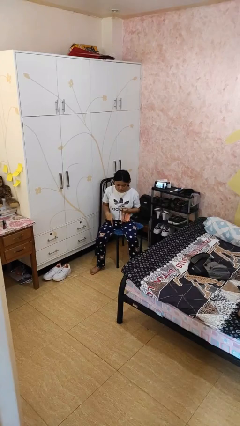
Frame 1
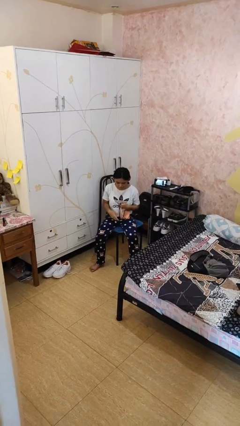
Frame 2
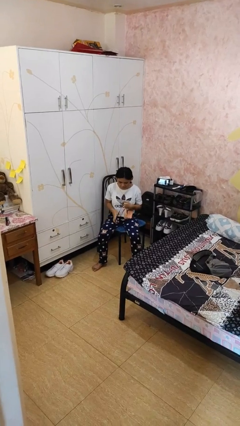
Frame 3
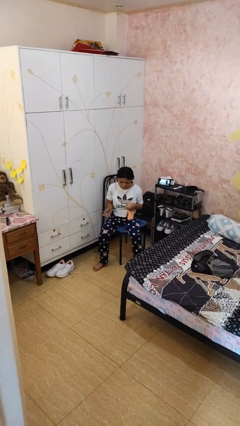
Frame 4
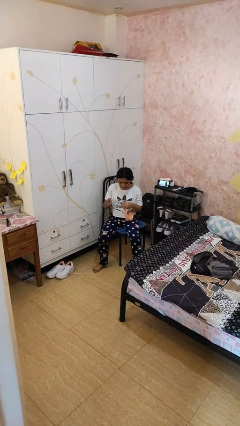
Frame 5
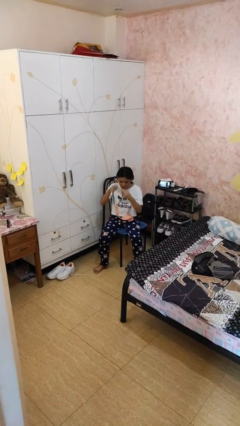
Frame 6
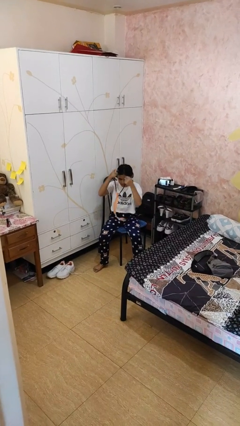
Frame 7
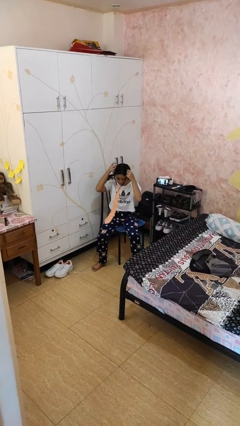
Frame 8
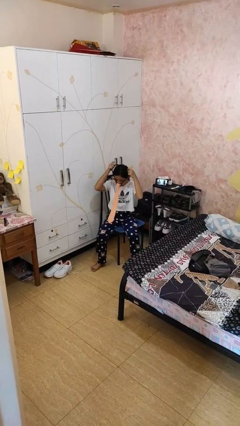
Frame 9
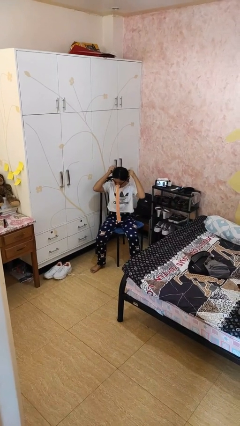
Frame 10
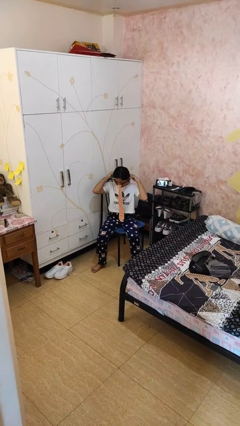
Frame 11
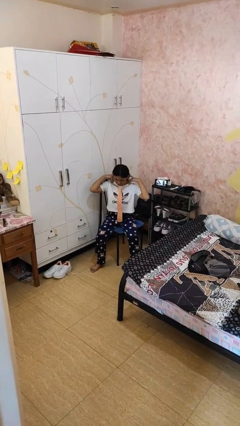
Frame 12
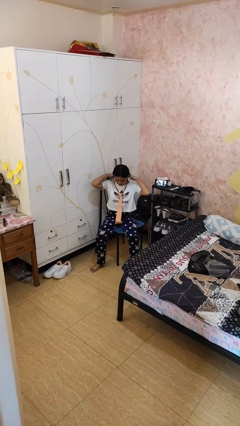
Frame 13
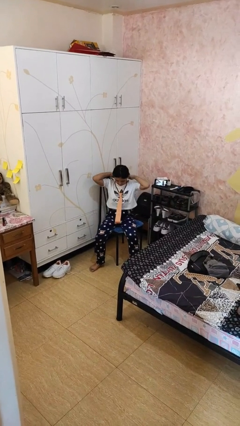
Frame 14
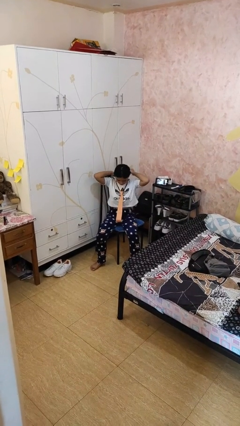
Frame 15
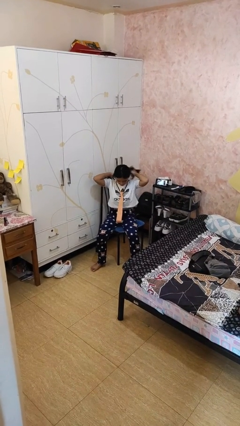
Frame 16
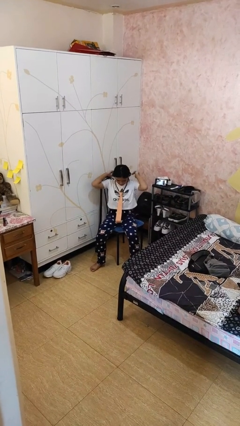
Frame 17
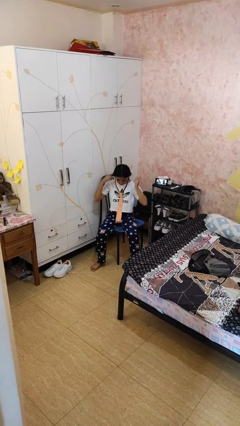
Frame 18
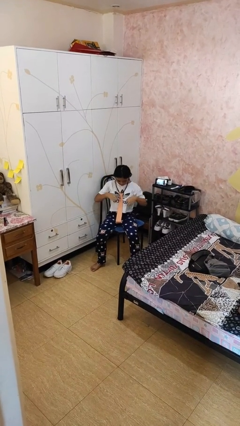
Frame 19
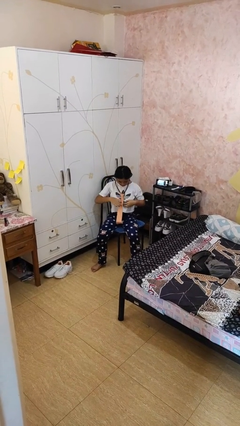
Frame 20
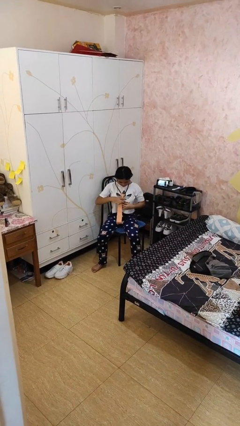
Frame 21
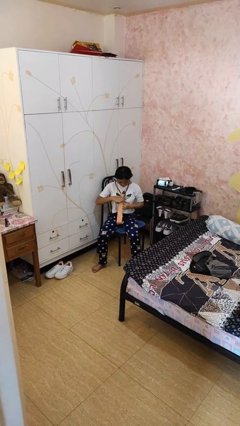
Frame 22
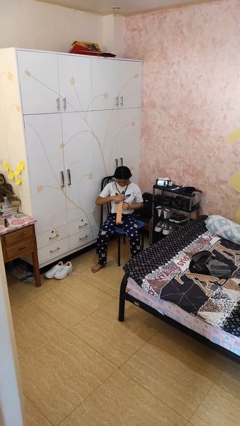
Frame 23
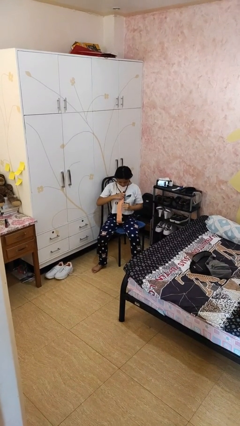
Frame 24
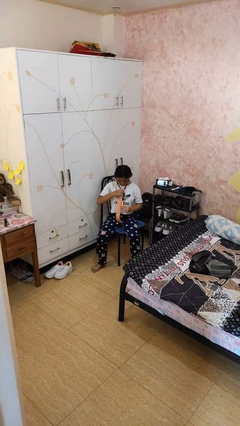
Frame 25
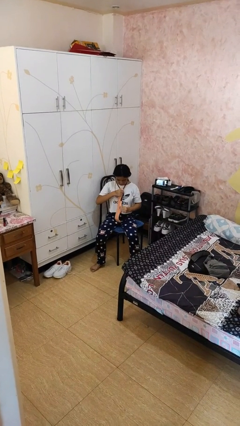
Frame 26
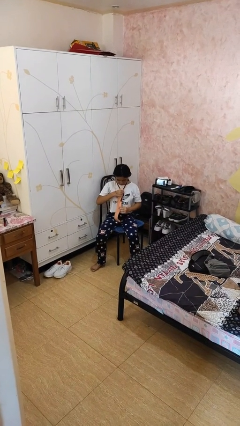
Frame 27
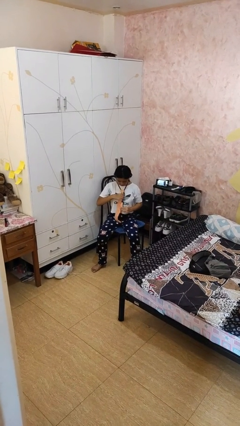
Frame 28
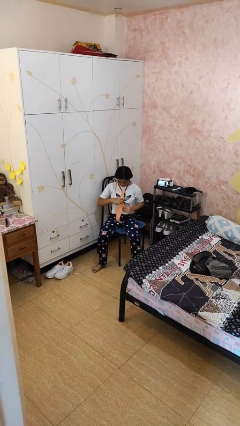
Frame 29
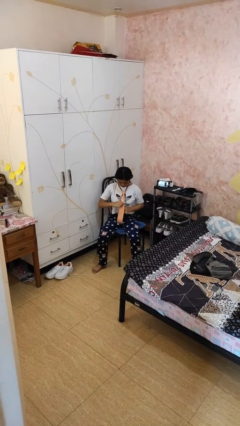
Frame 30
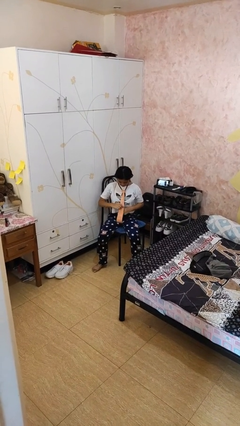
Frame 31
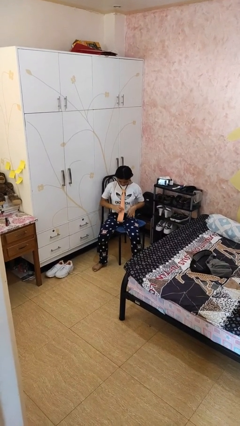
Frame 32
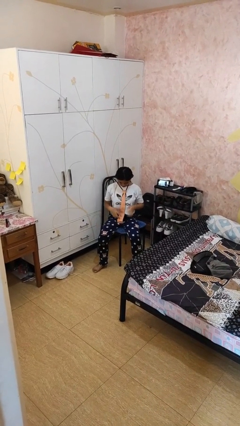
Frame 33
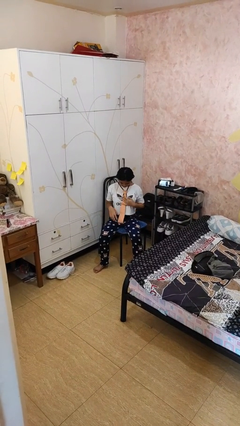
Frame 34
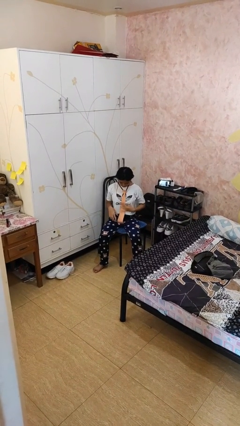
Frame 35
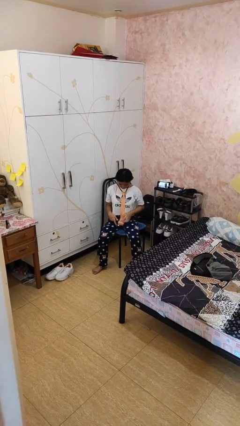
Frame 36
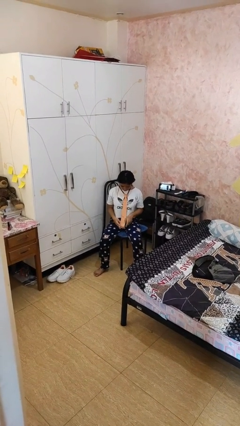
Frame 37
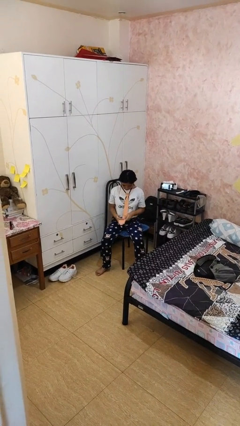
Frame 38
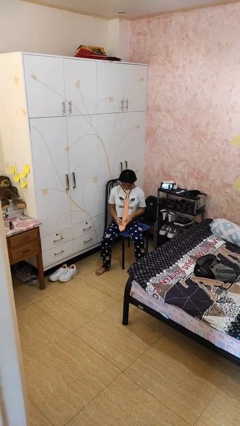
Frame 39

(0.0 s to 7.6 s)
person puts on necktie

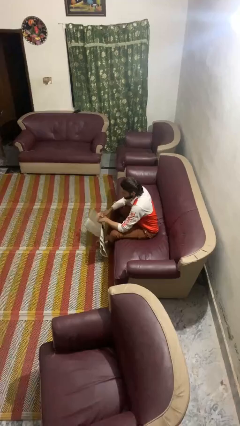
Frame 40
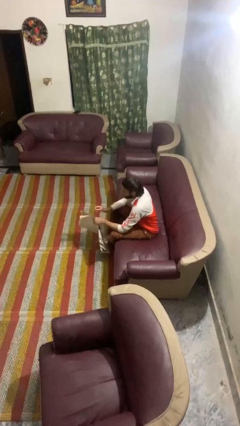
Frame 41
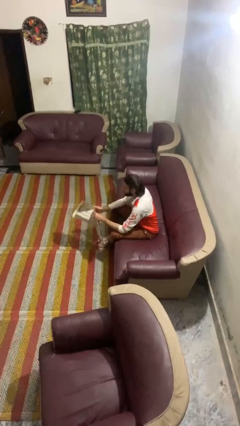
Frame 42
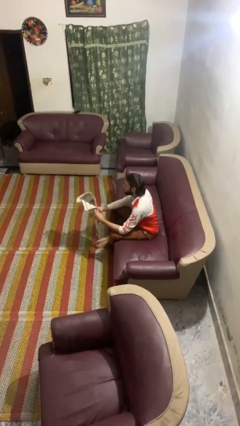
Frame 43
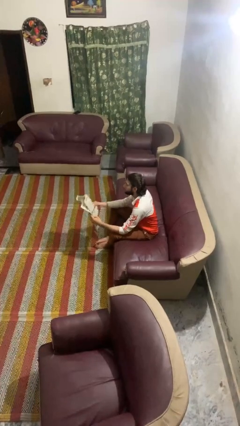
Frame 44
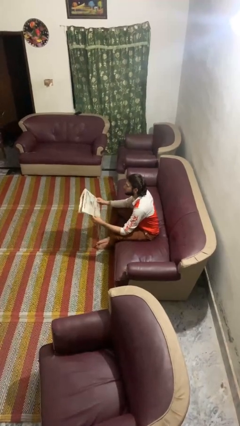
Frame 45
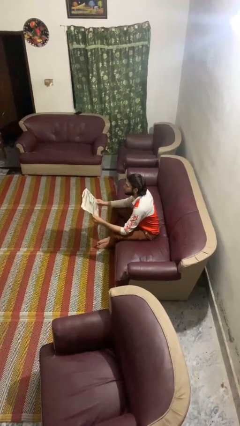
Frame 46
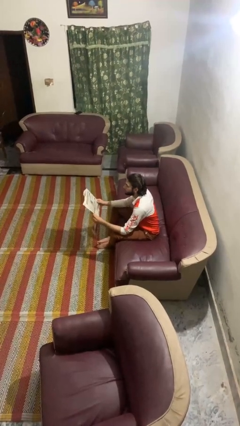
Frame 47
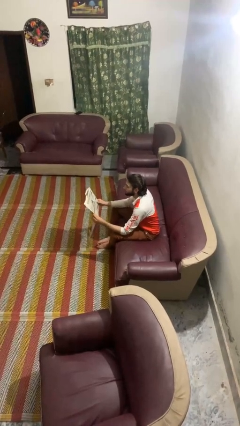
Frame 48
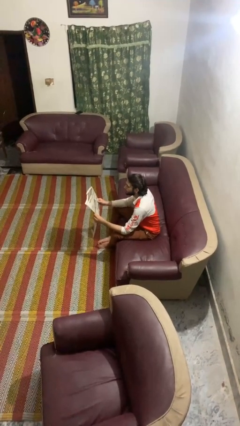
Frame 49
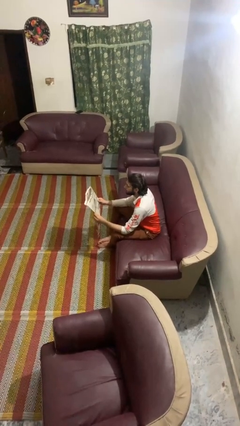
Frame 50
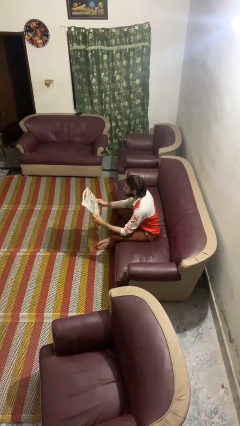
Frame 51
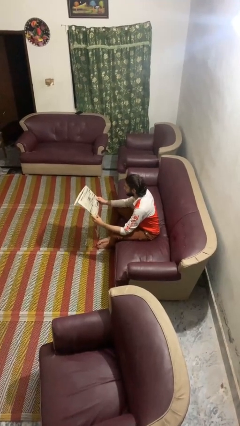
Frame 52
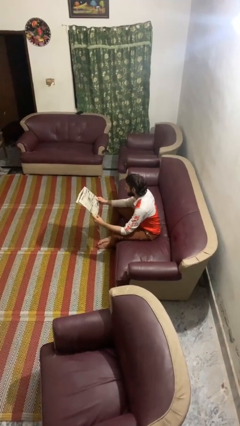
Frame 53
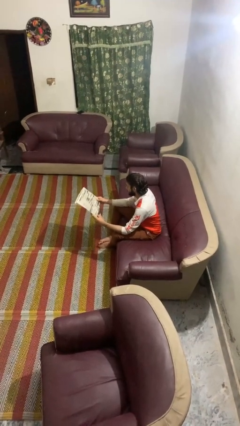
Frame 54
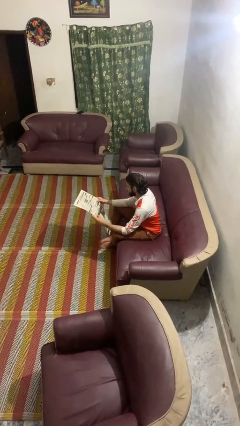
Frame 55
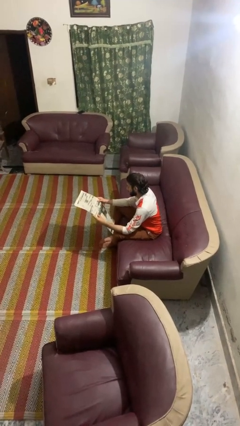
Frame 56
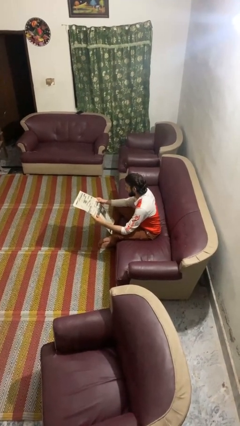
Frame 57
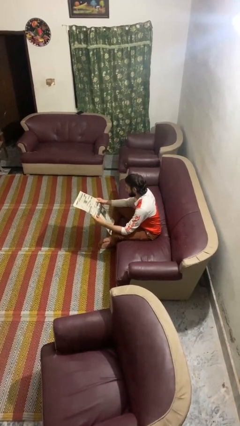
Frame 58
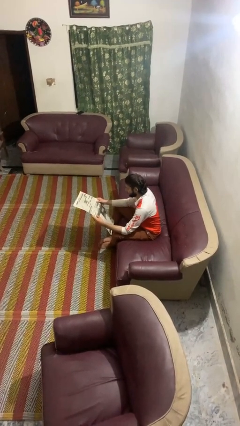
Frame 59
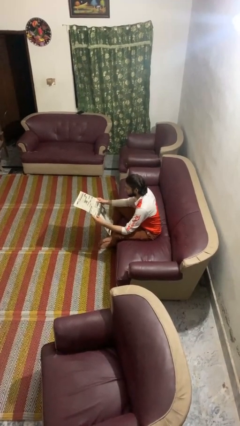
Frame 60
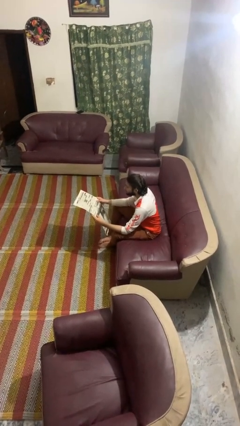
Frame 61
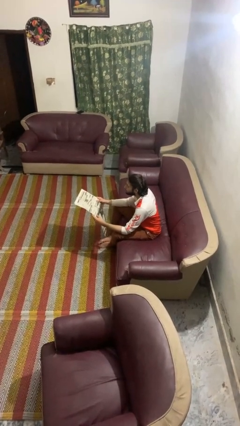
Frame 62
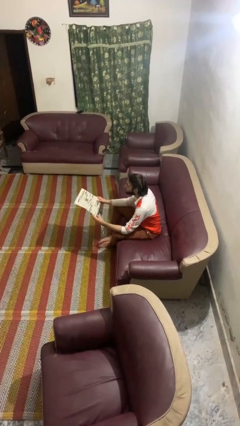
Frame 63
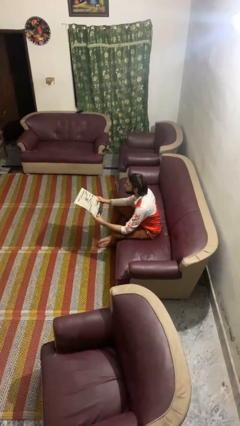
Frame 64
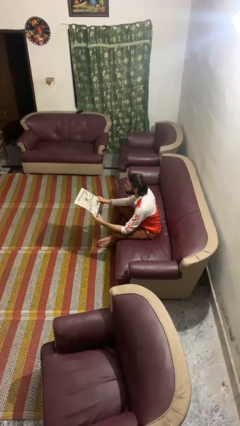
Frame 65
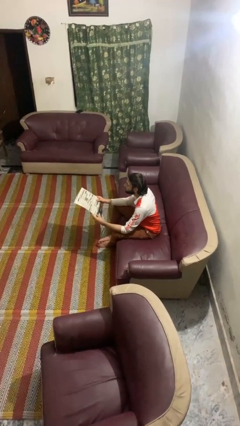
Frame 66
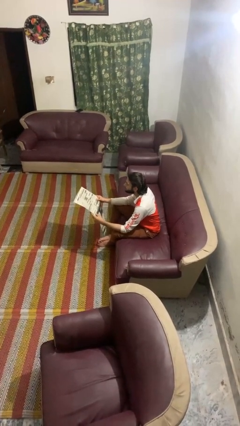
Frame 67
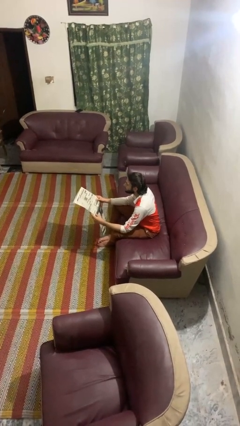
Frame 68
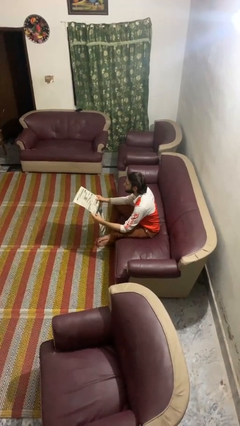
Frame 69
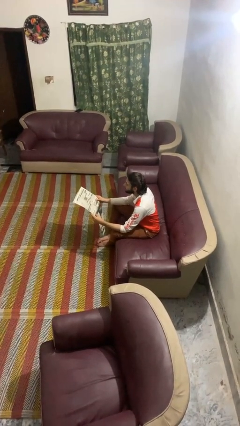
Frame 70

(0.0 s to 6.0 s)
person reads newspaper

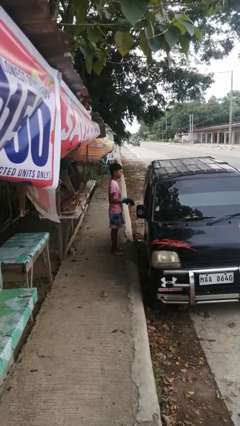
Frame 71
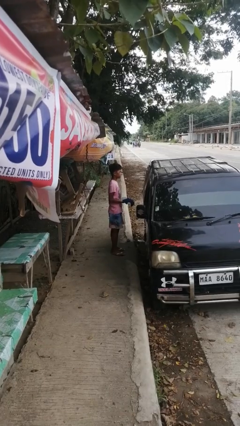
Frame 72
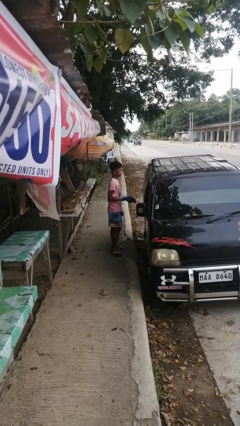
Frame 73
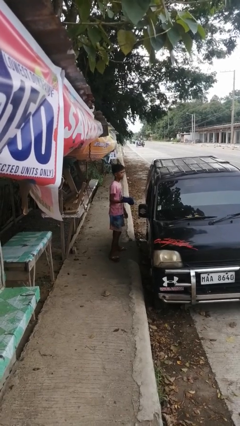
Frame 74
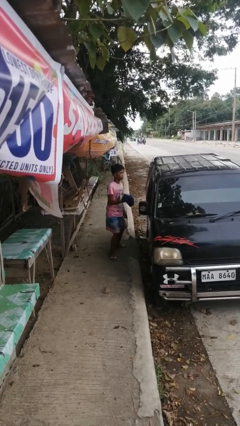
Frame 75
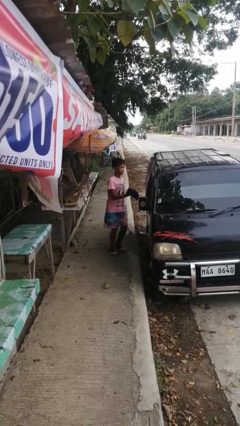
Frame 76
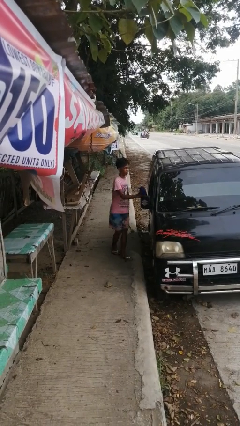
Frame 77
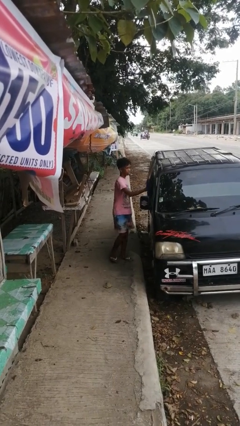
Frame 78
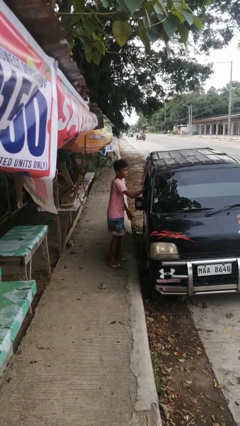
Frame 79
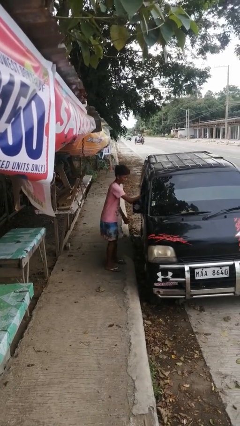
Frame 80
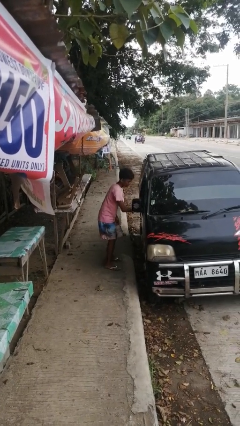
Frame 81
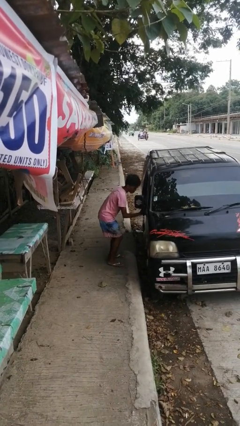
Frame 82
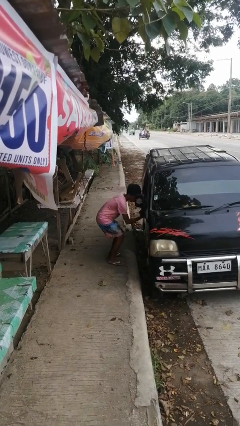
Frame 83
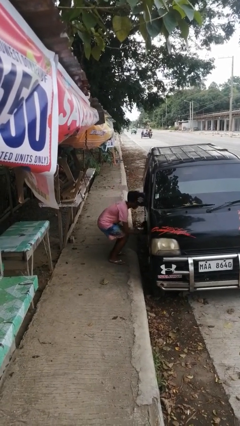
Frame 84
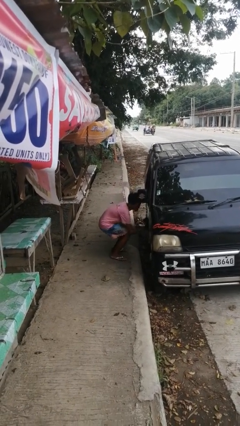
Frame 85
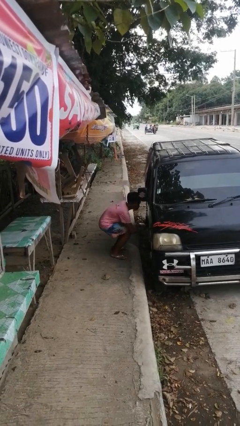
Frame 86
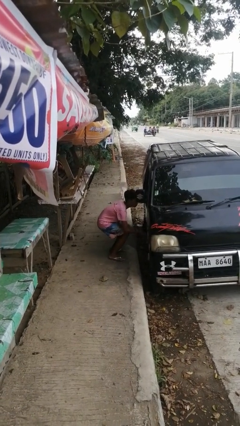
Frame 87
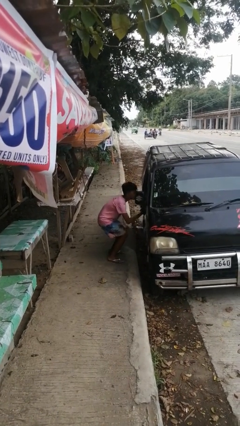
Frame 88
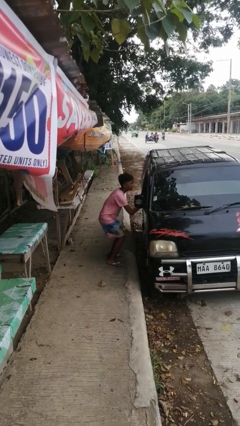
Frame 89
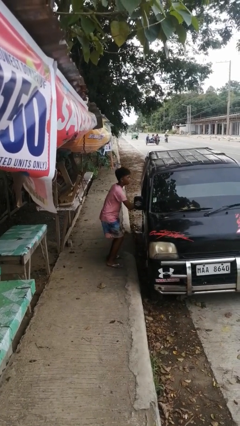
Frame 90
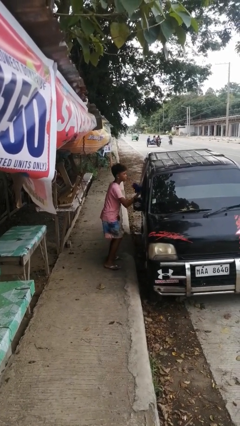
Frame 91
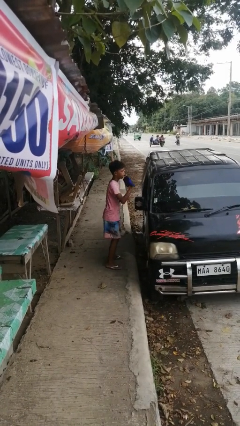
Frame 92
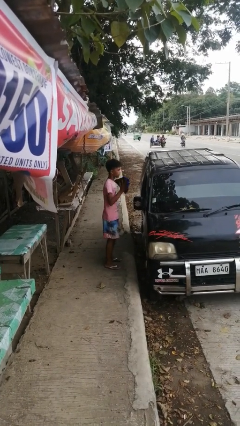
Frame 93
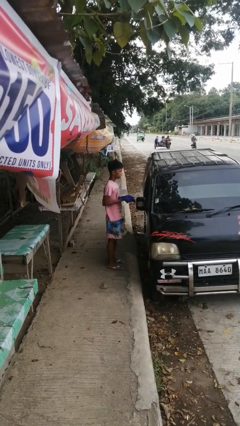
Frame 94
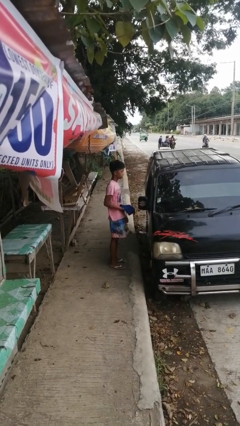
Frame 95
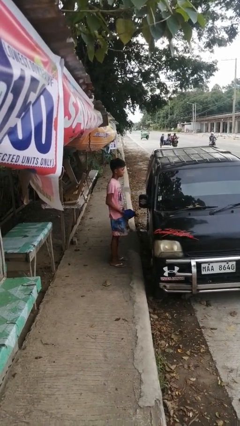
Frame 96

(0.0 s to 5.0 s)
person polishes car with rag
